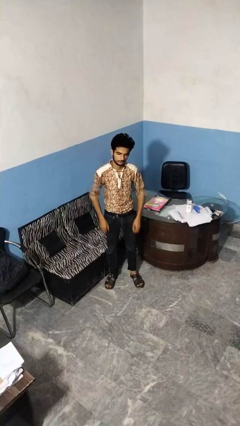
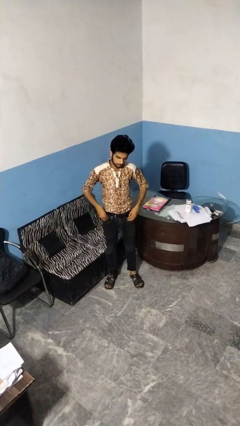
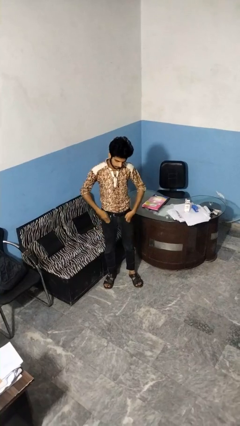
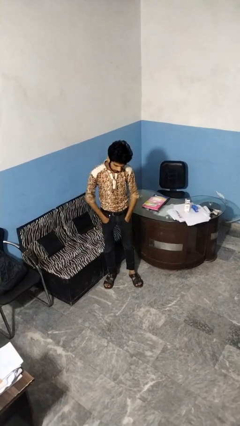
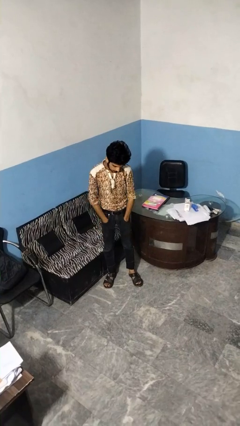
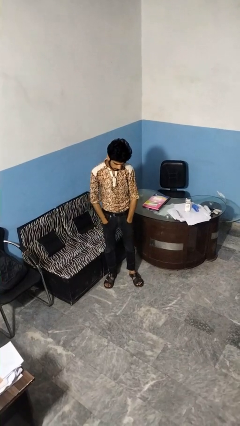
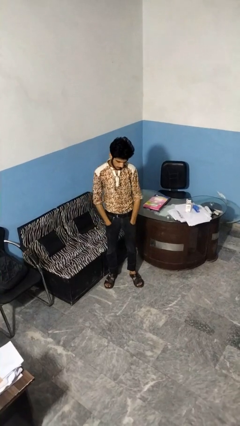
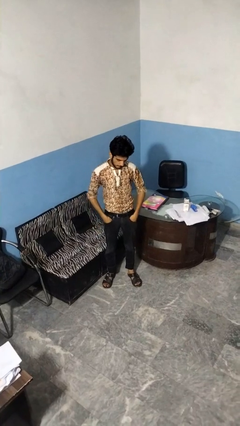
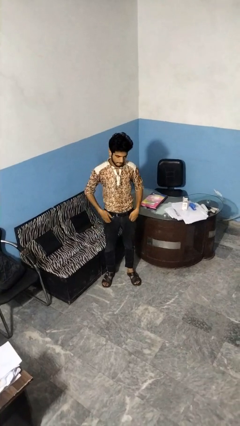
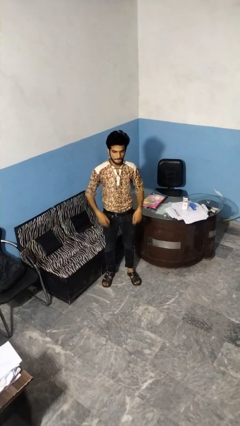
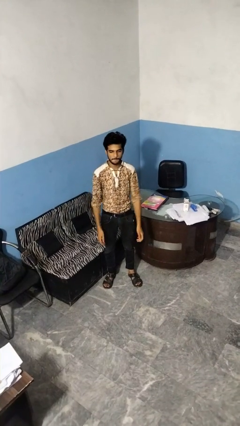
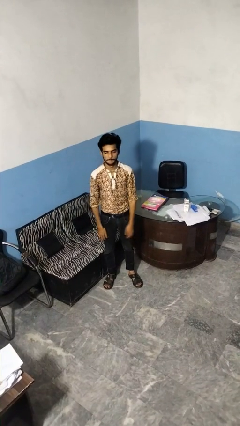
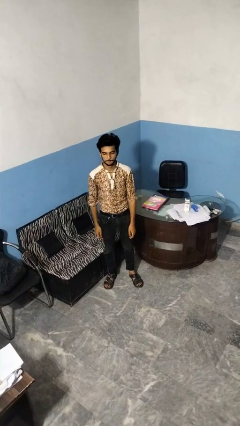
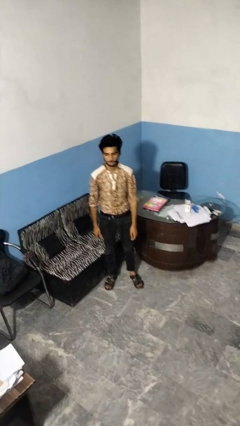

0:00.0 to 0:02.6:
person puts hands in back pockets

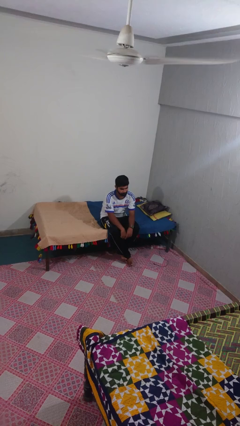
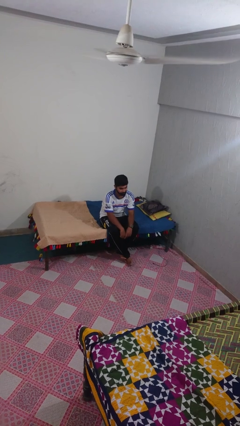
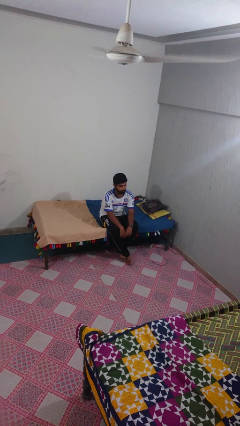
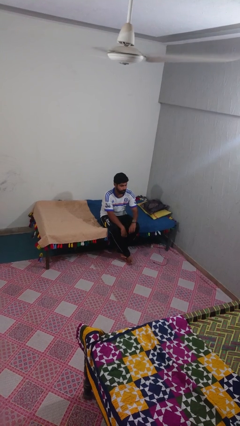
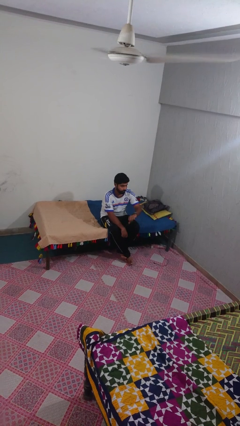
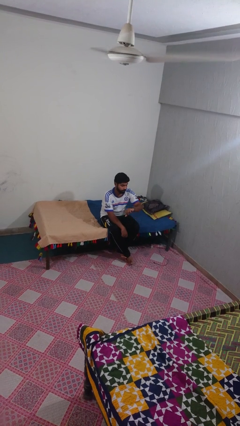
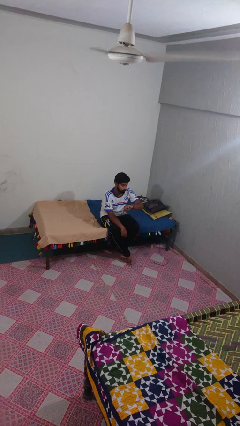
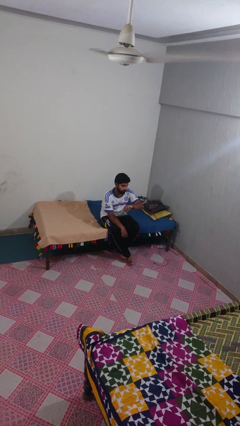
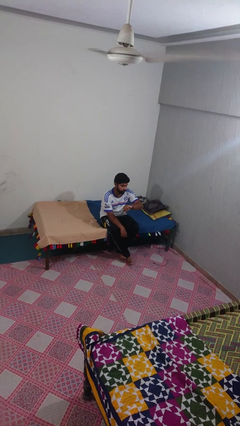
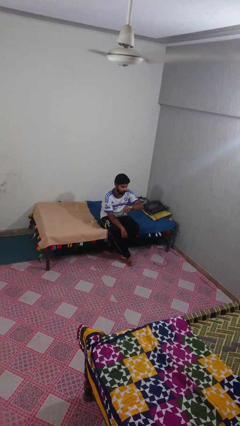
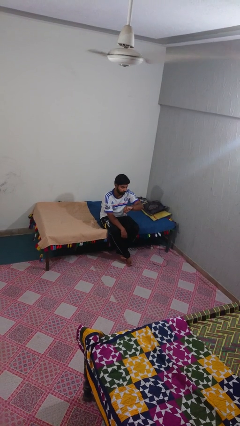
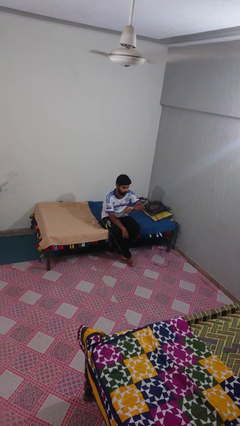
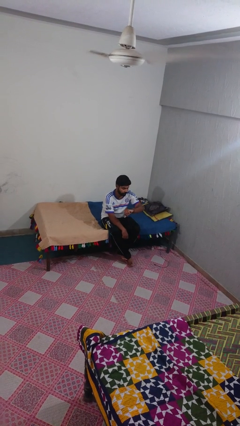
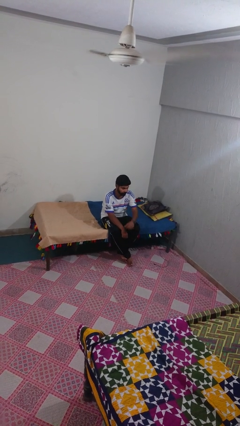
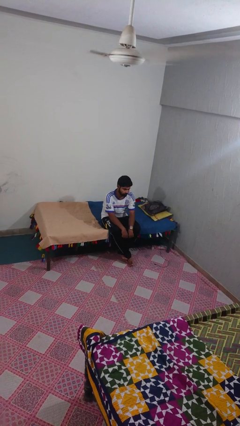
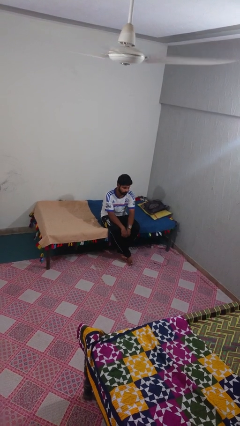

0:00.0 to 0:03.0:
person looks at wristwatch

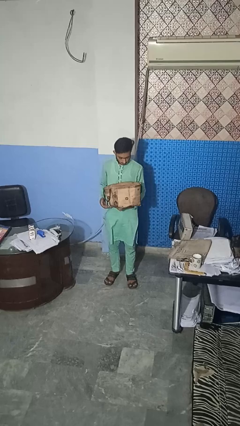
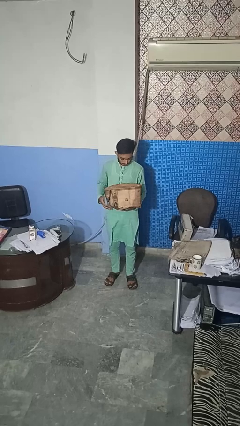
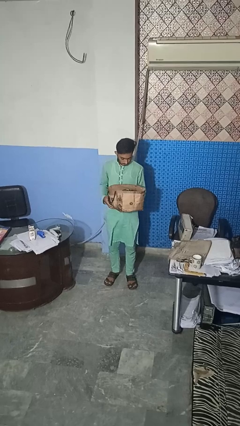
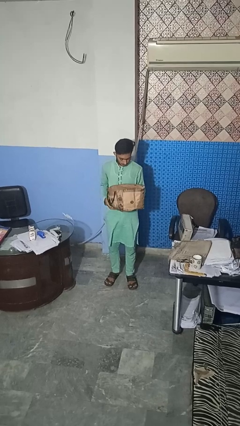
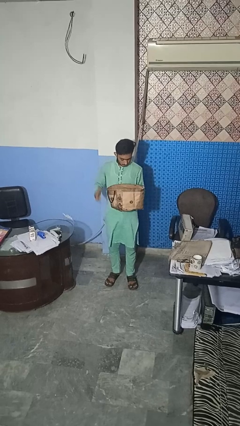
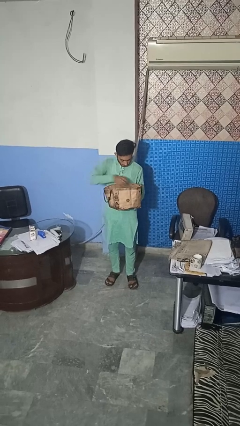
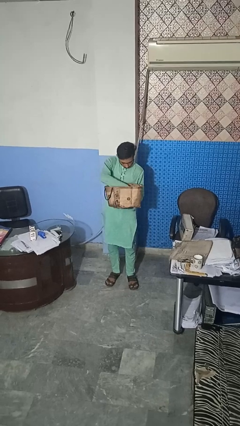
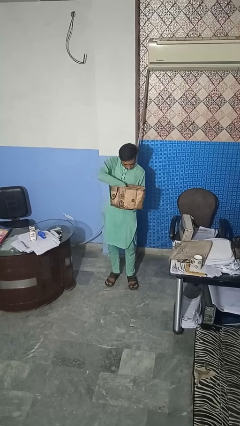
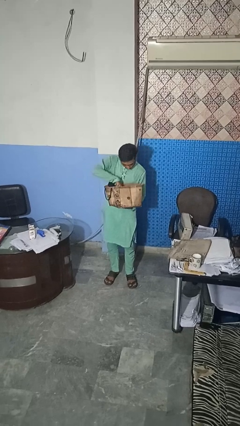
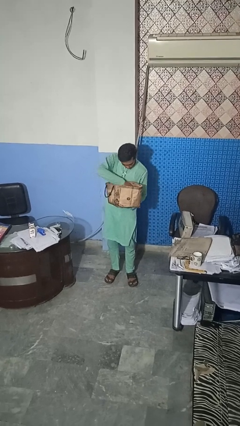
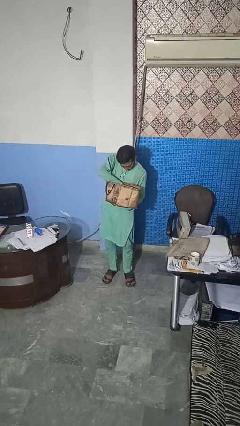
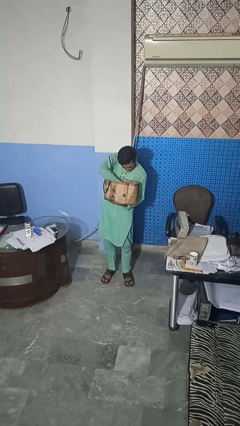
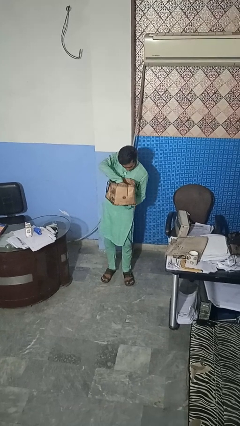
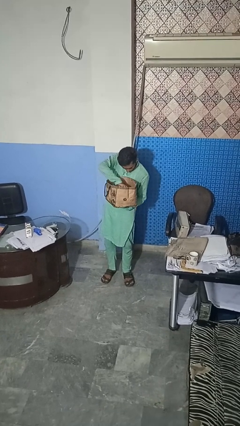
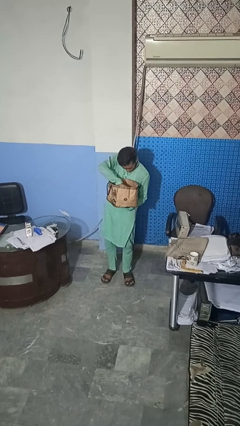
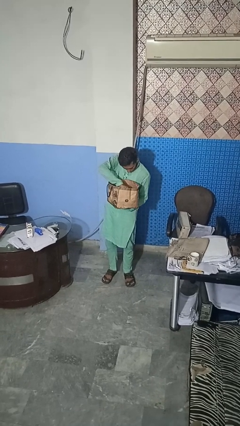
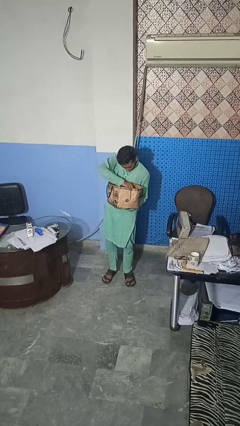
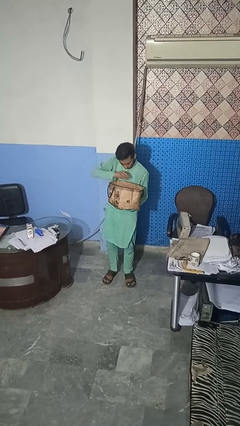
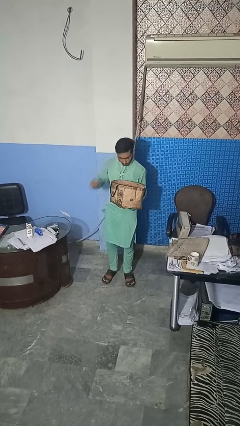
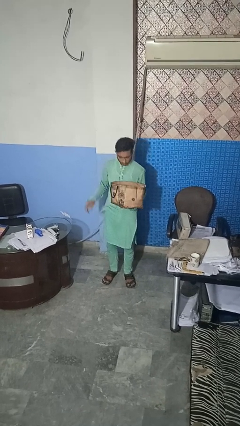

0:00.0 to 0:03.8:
person searches in bag

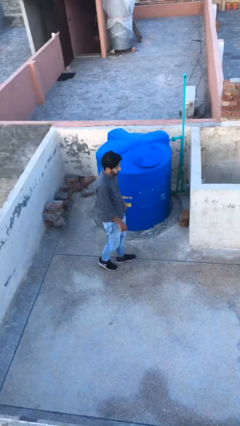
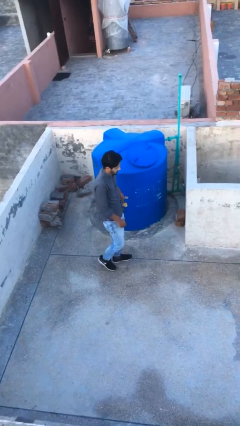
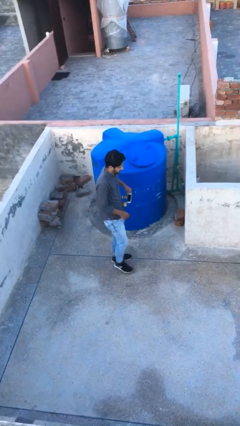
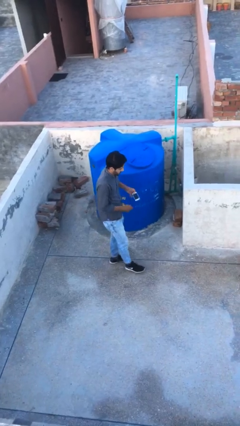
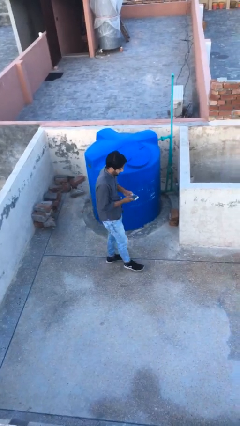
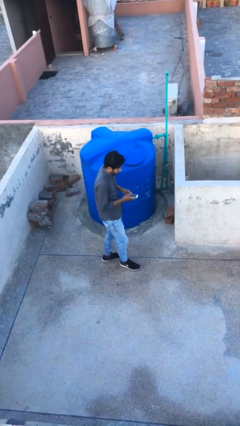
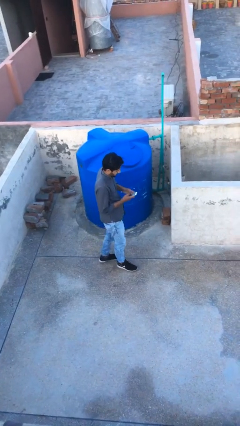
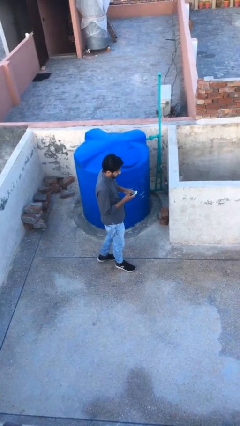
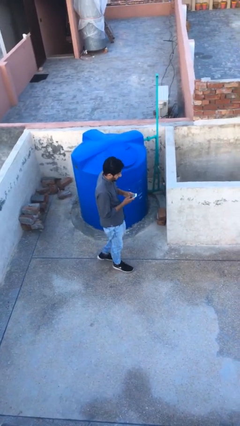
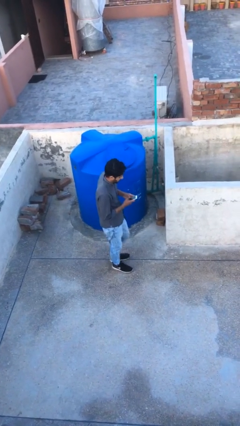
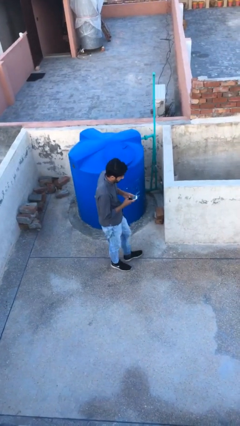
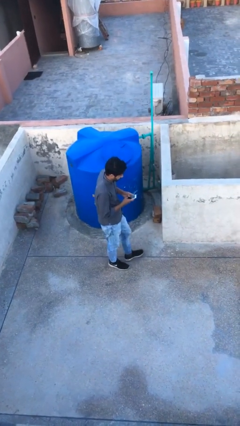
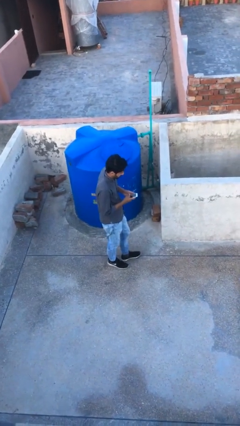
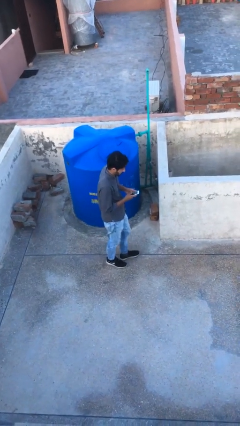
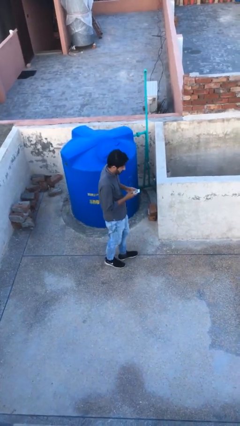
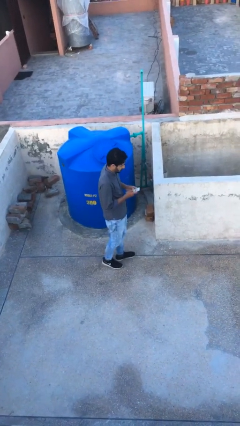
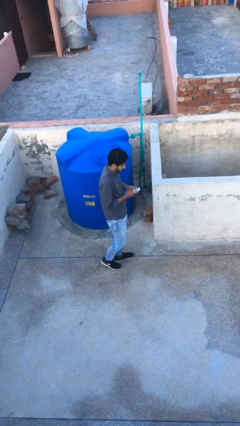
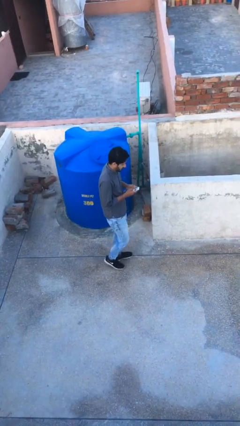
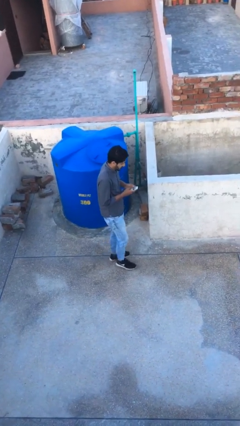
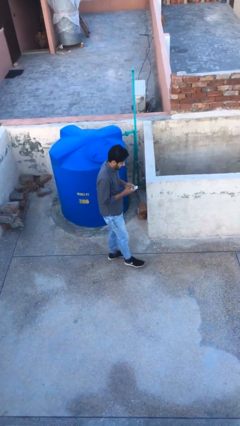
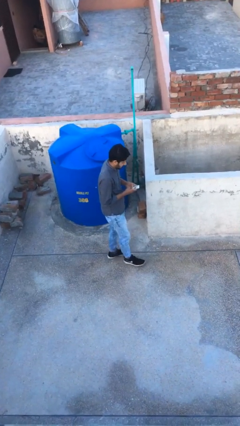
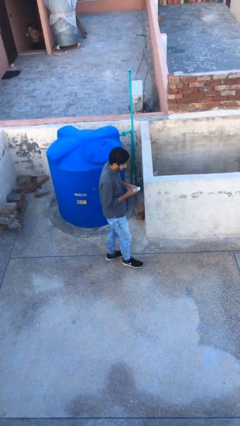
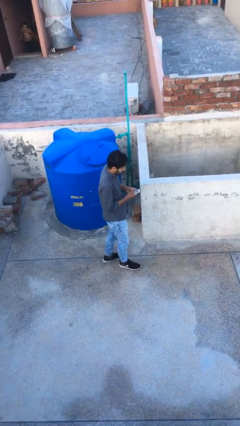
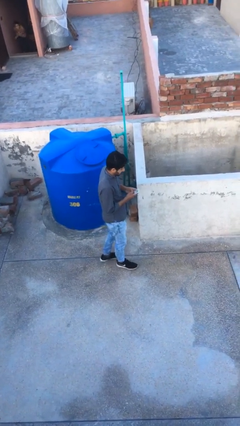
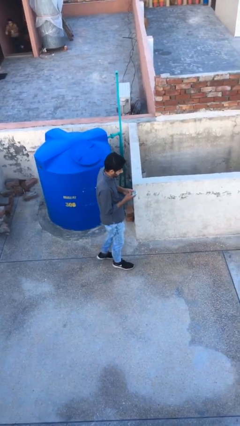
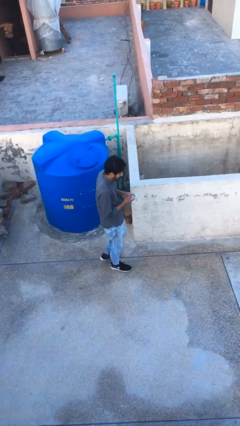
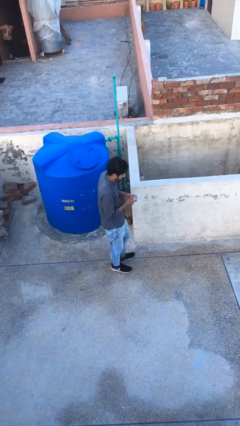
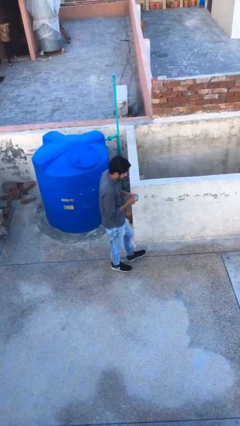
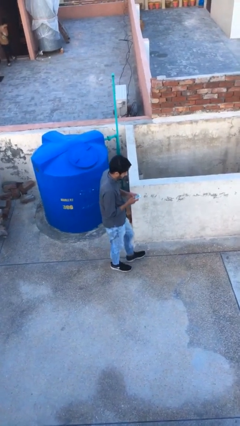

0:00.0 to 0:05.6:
person texts on phone

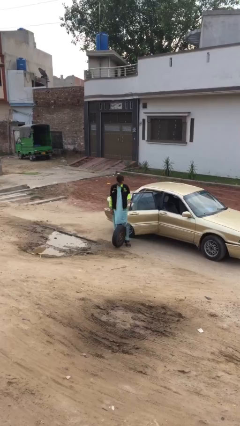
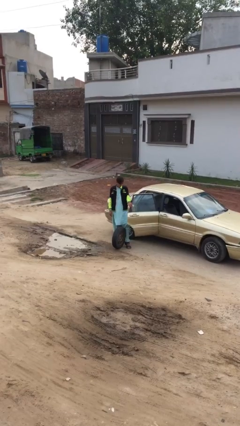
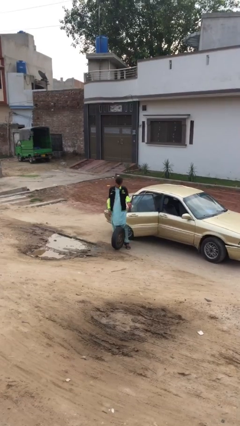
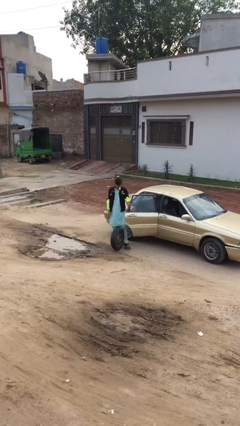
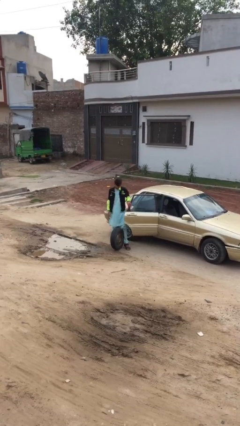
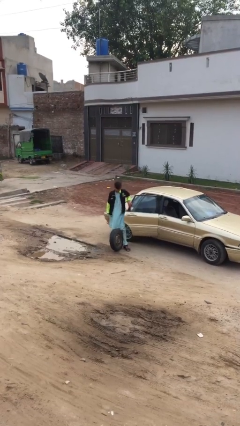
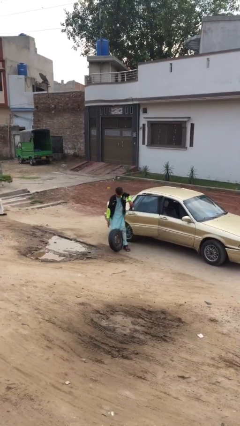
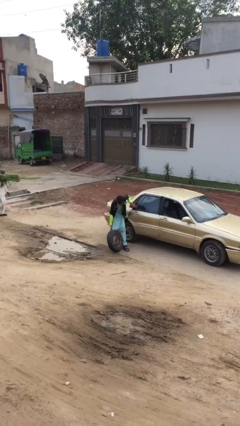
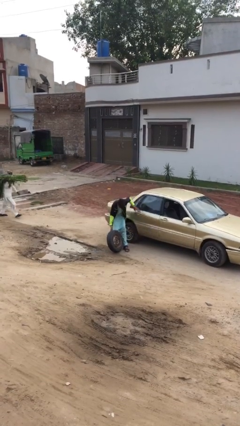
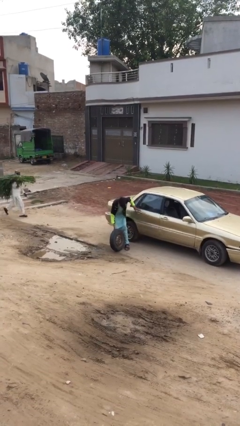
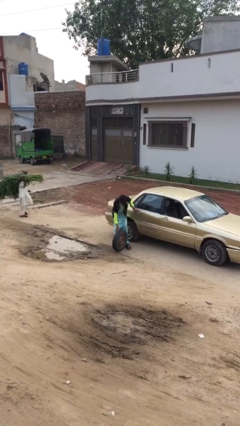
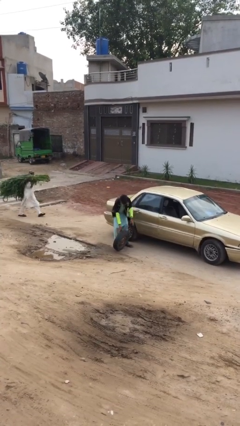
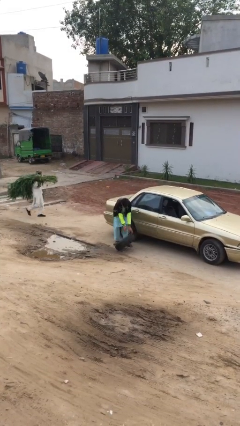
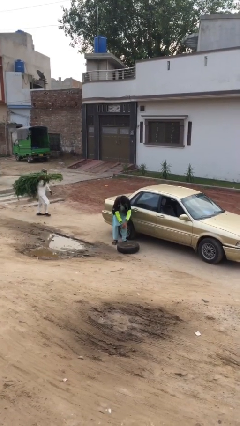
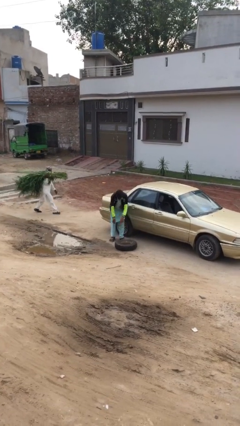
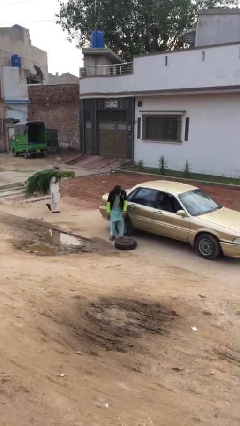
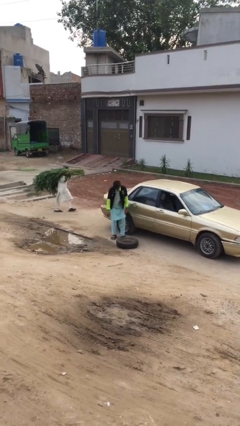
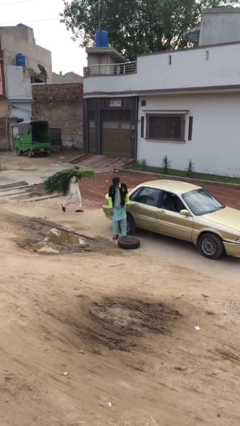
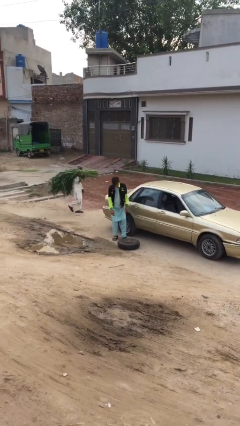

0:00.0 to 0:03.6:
person closes car door
